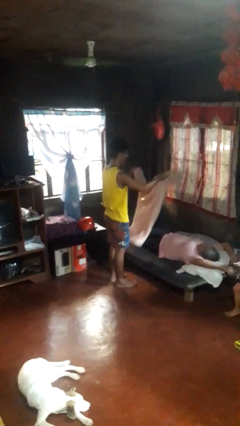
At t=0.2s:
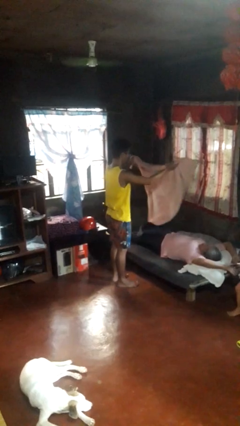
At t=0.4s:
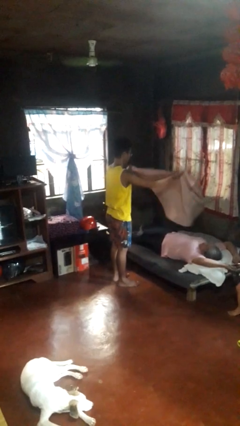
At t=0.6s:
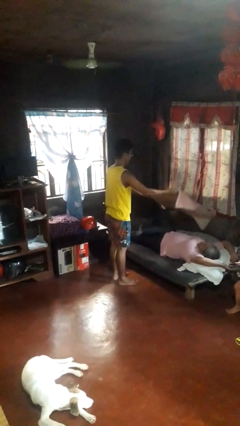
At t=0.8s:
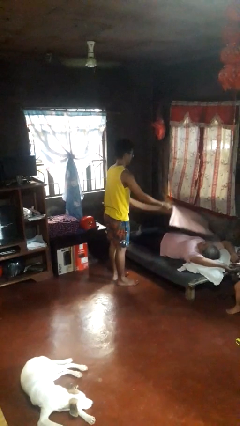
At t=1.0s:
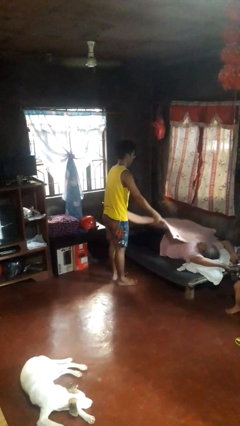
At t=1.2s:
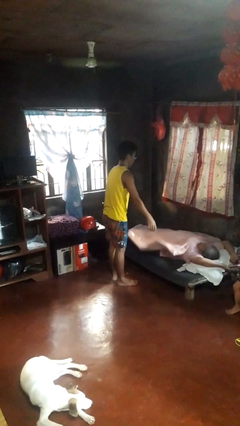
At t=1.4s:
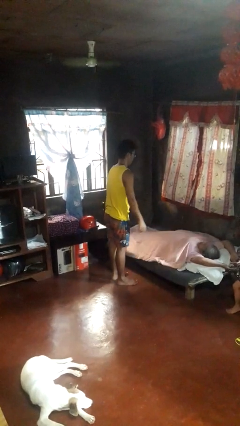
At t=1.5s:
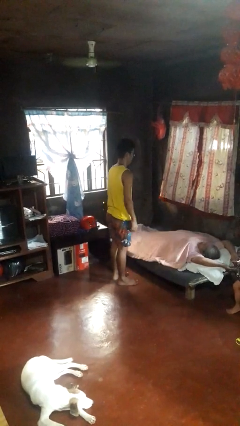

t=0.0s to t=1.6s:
person covers friend with blanket

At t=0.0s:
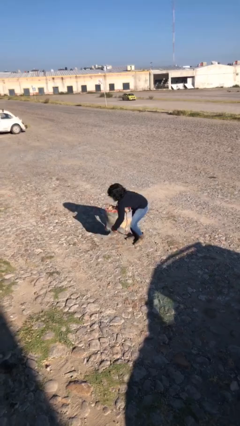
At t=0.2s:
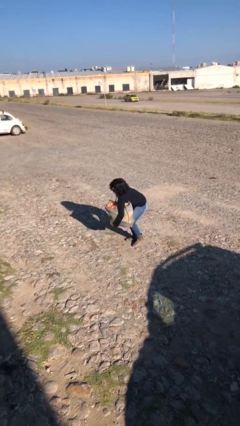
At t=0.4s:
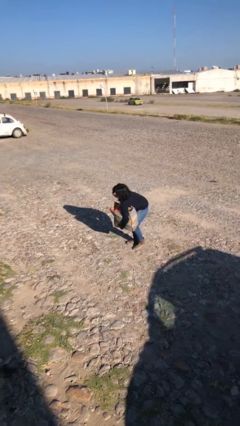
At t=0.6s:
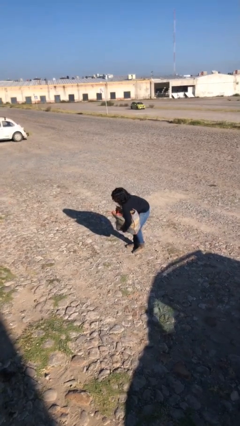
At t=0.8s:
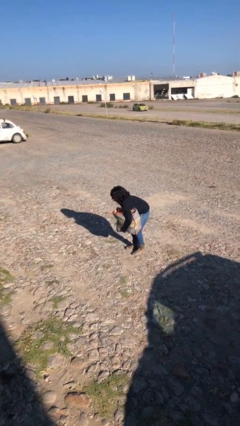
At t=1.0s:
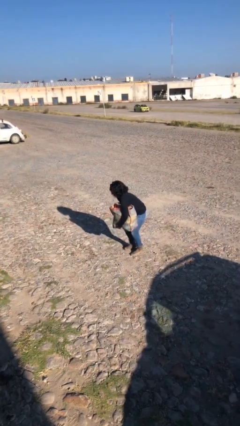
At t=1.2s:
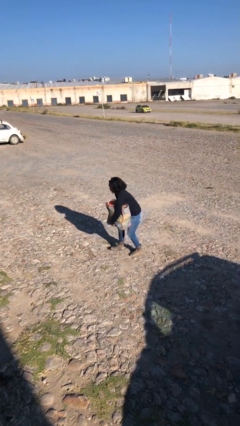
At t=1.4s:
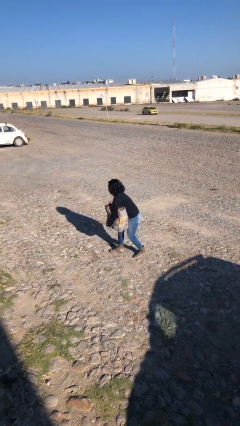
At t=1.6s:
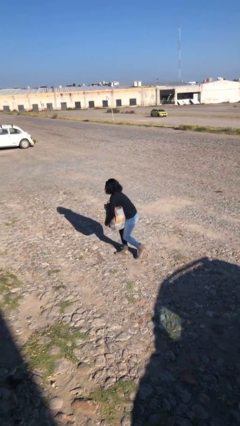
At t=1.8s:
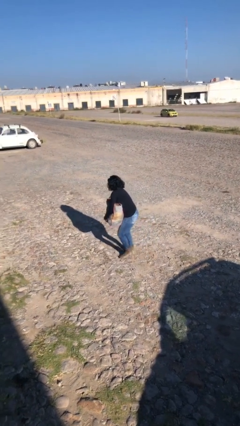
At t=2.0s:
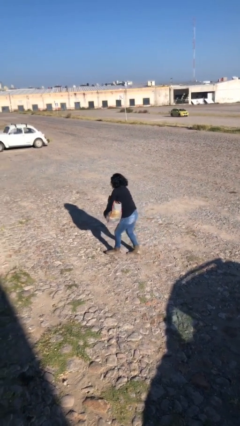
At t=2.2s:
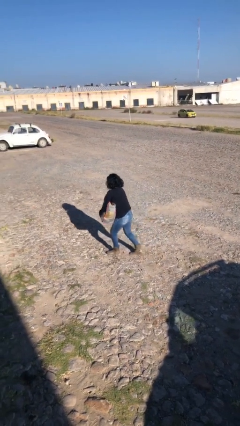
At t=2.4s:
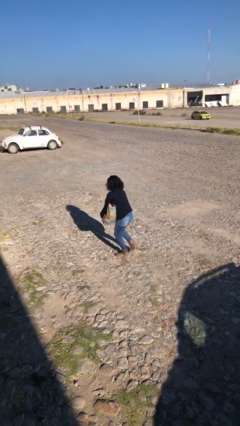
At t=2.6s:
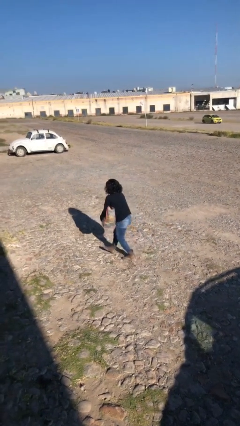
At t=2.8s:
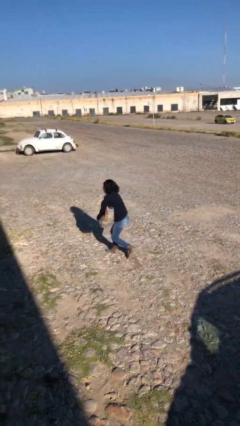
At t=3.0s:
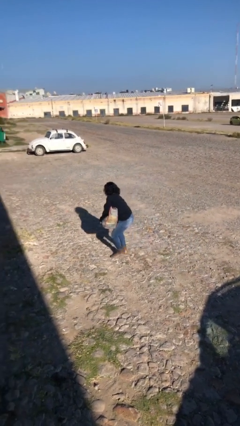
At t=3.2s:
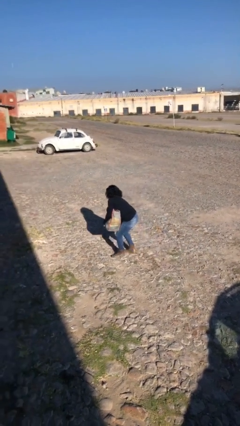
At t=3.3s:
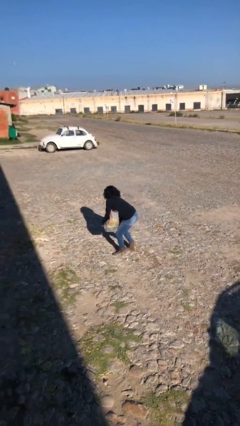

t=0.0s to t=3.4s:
person carries heavy object

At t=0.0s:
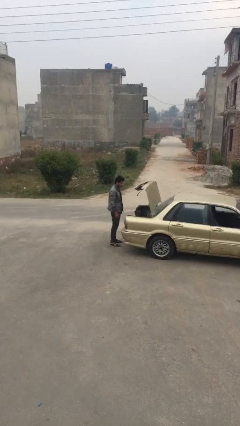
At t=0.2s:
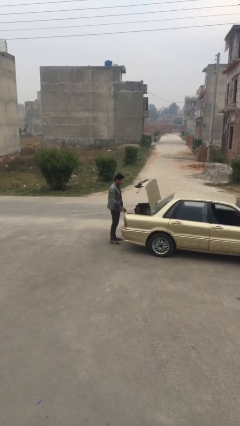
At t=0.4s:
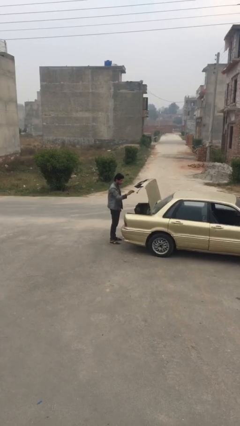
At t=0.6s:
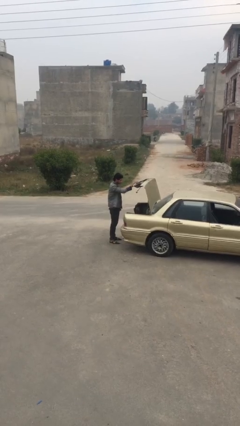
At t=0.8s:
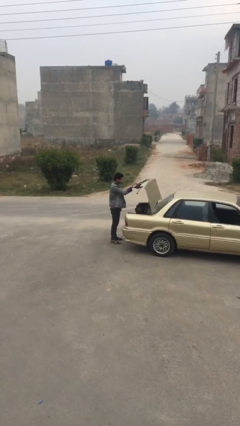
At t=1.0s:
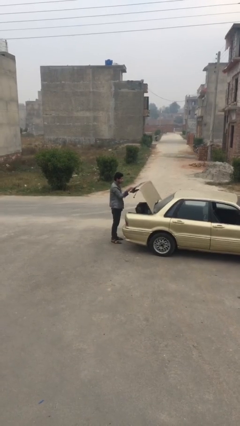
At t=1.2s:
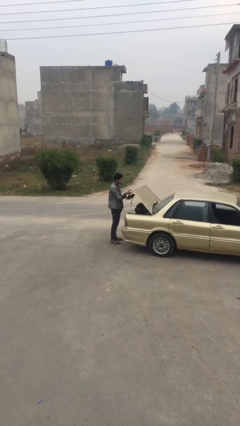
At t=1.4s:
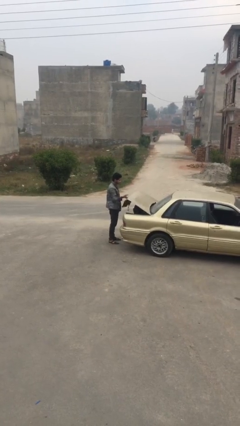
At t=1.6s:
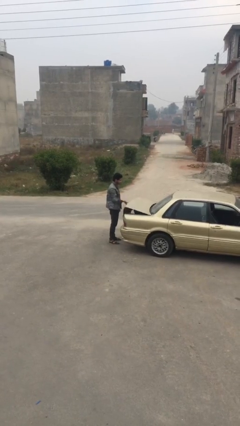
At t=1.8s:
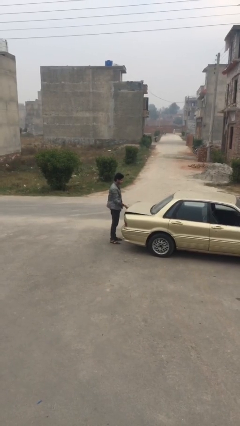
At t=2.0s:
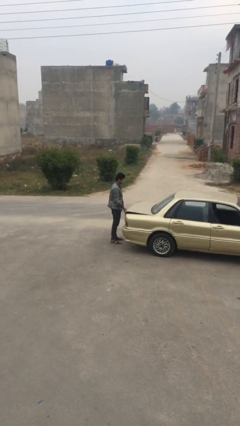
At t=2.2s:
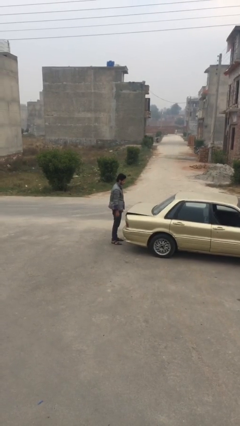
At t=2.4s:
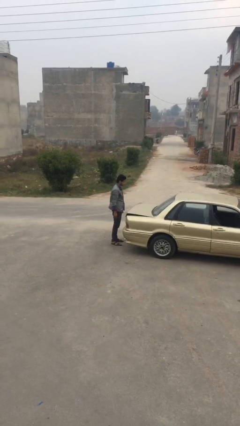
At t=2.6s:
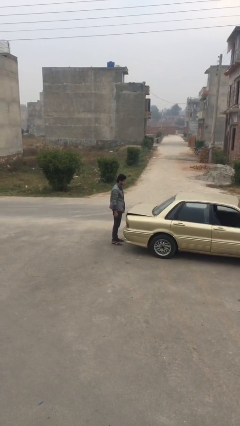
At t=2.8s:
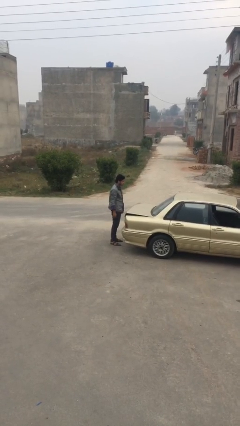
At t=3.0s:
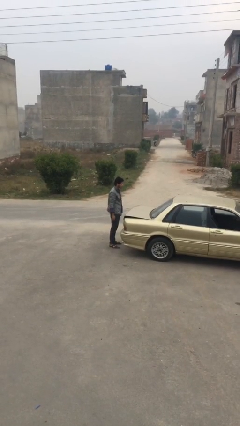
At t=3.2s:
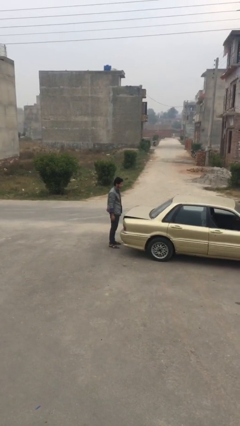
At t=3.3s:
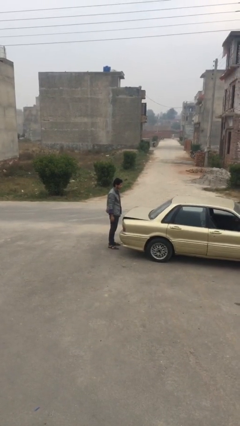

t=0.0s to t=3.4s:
person closes car trunk

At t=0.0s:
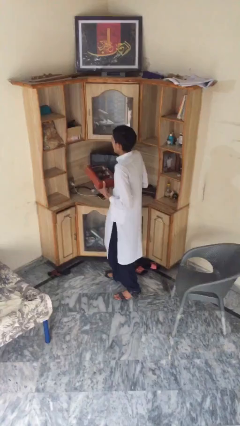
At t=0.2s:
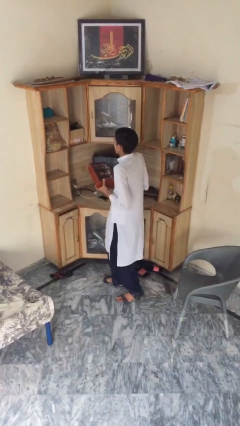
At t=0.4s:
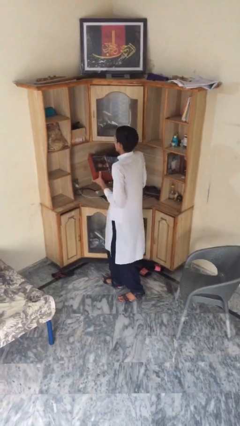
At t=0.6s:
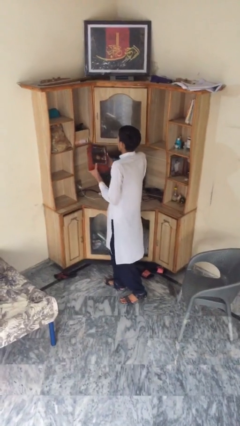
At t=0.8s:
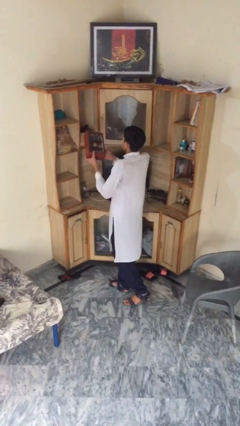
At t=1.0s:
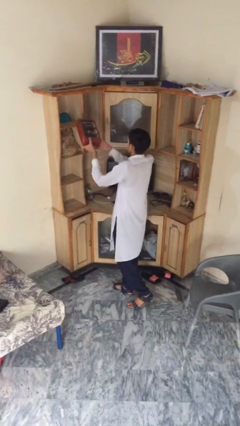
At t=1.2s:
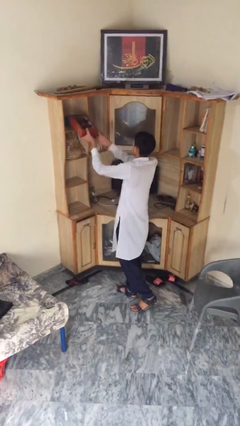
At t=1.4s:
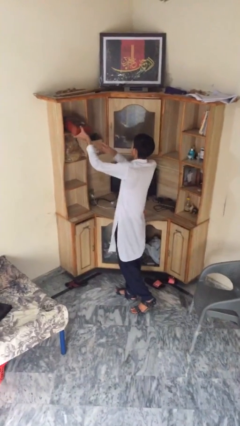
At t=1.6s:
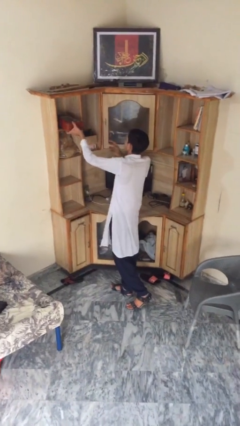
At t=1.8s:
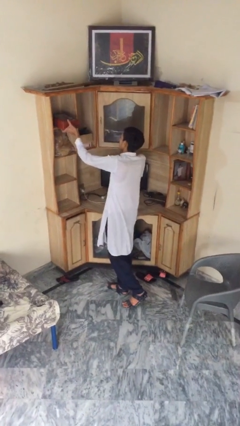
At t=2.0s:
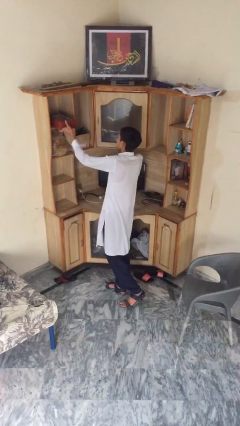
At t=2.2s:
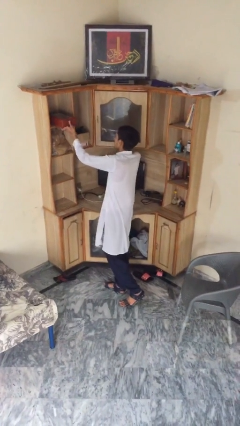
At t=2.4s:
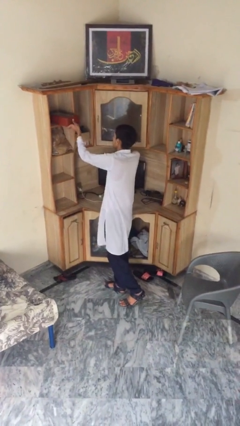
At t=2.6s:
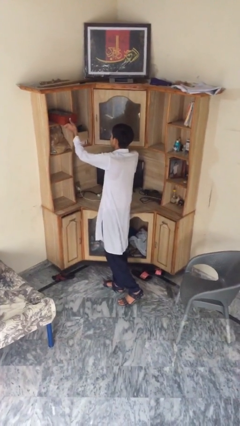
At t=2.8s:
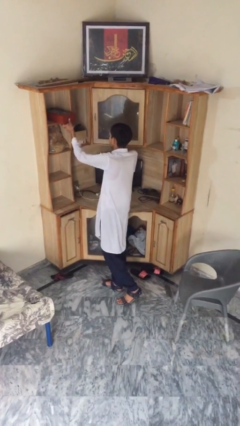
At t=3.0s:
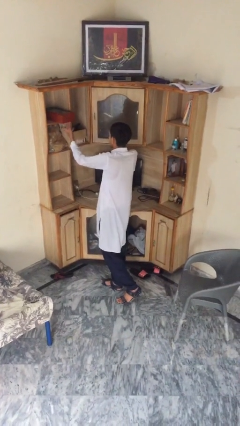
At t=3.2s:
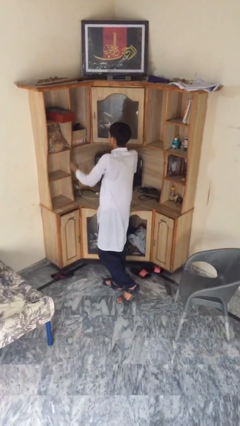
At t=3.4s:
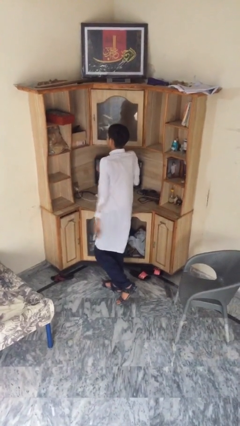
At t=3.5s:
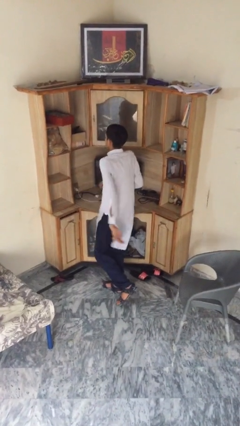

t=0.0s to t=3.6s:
person puts down object on shelf

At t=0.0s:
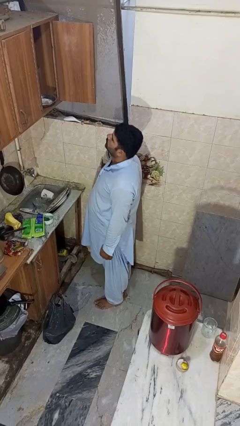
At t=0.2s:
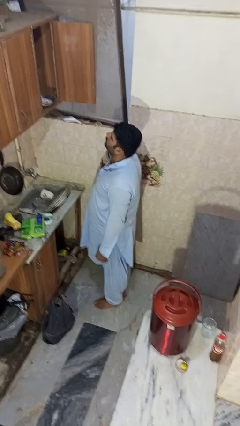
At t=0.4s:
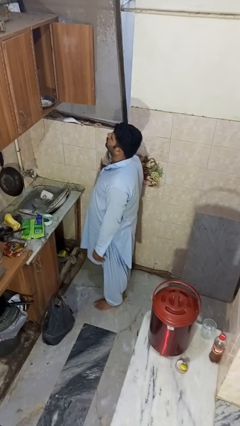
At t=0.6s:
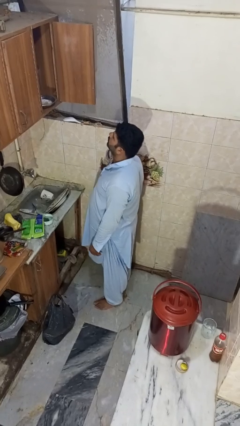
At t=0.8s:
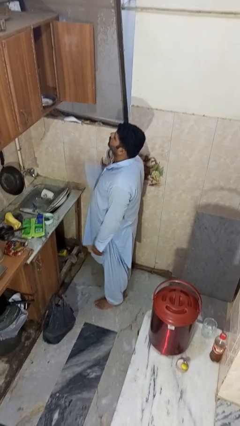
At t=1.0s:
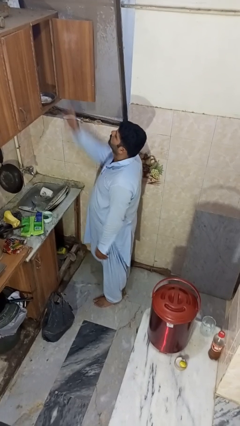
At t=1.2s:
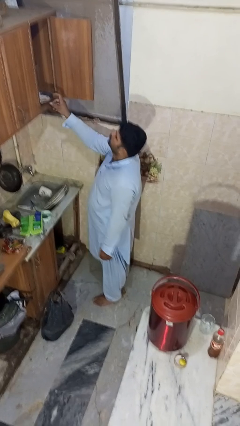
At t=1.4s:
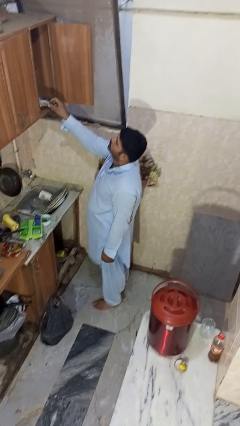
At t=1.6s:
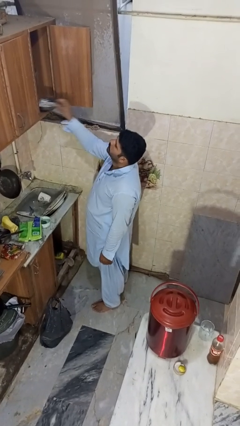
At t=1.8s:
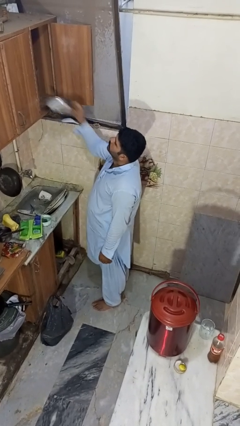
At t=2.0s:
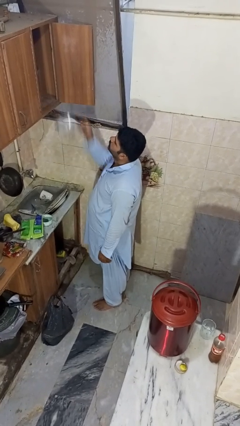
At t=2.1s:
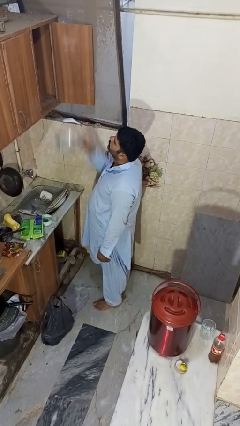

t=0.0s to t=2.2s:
person takes object from cabinet

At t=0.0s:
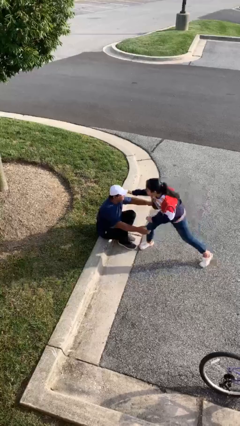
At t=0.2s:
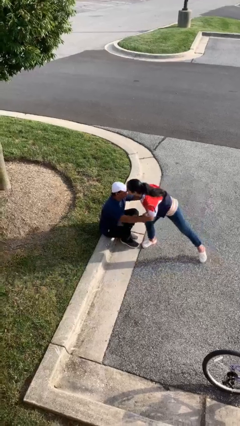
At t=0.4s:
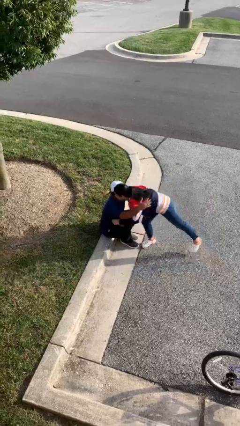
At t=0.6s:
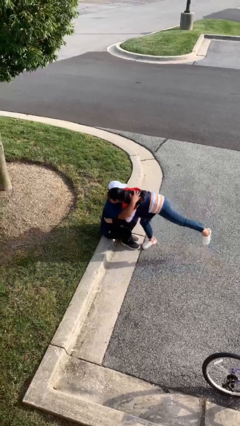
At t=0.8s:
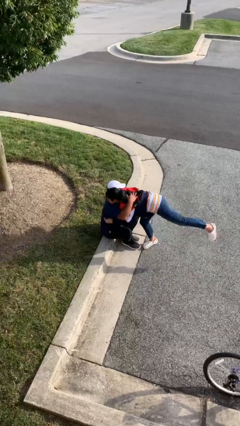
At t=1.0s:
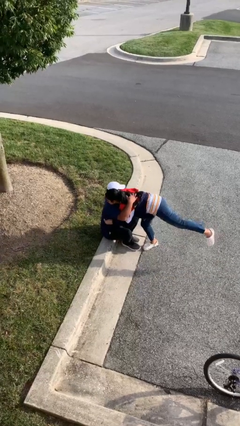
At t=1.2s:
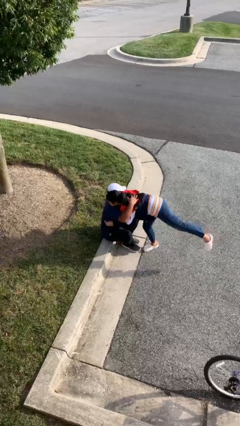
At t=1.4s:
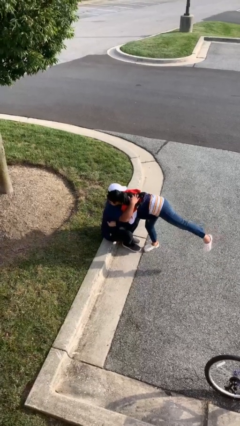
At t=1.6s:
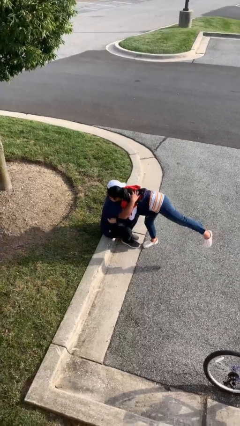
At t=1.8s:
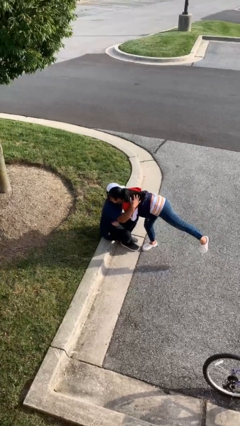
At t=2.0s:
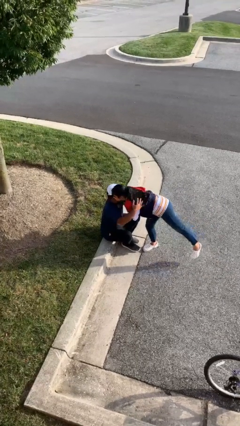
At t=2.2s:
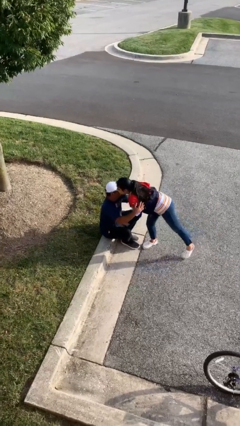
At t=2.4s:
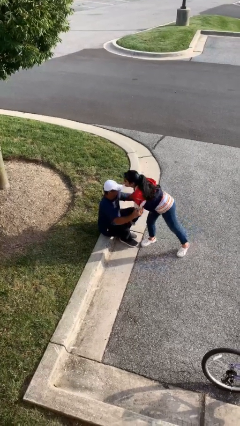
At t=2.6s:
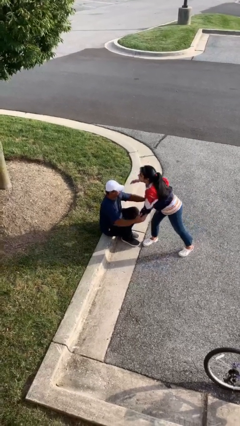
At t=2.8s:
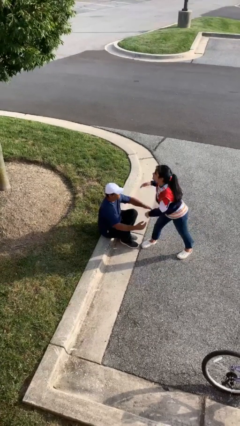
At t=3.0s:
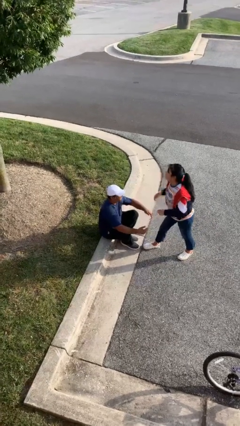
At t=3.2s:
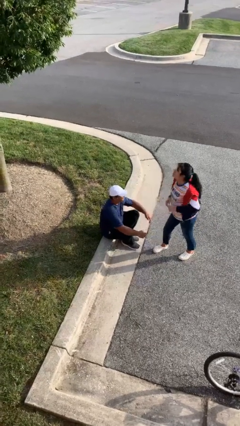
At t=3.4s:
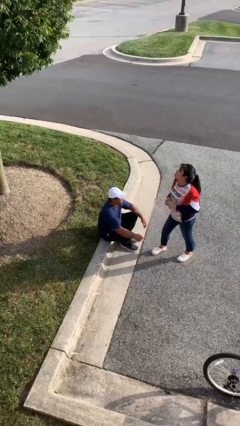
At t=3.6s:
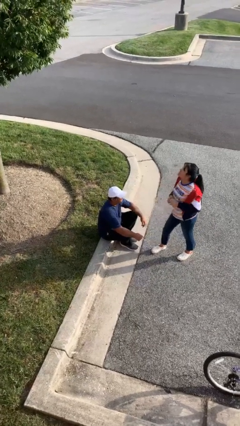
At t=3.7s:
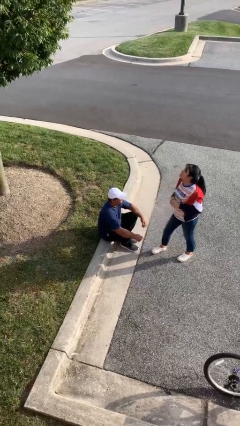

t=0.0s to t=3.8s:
person embraces person
